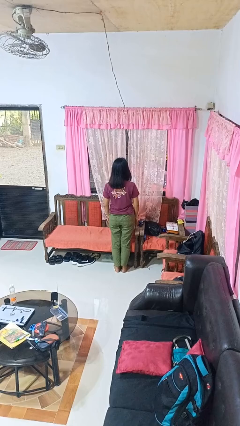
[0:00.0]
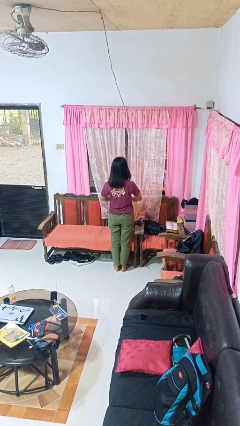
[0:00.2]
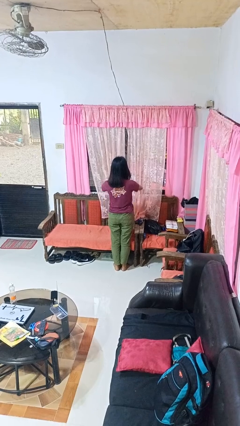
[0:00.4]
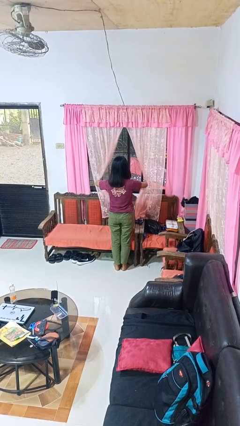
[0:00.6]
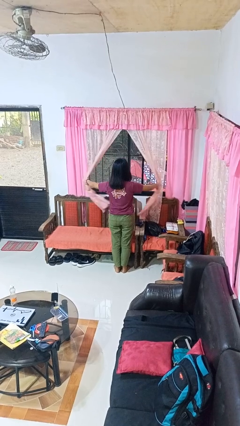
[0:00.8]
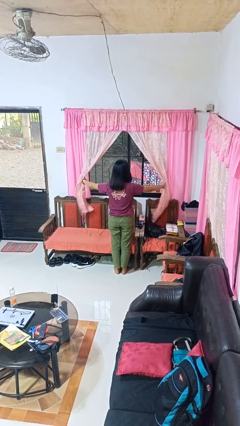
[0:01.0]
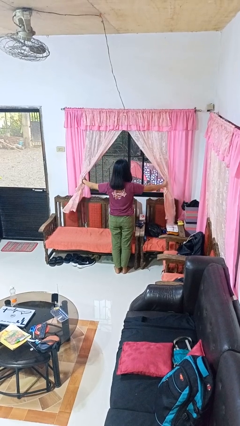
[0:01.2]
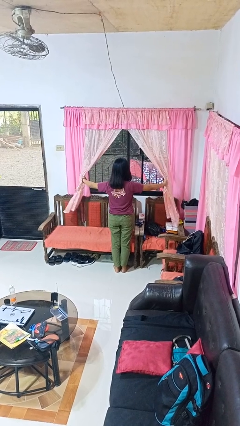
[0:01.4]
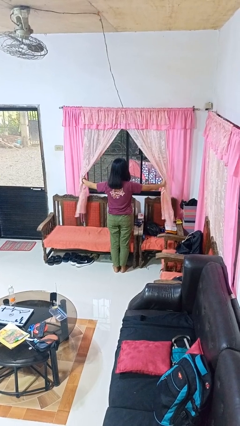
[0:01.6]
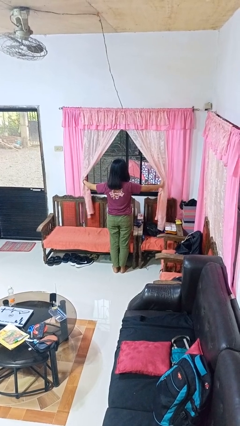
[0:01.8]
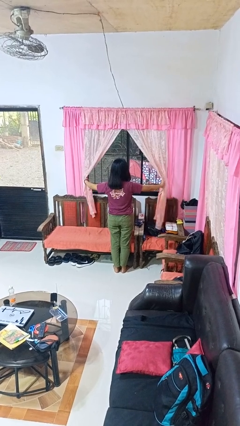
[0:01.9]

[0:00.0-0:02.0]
person opens curtains

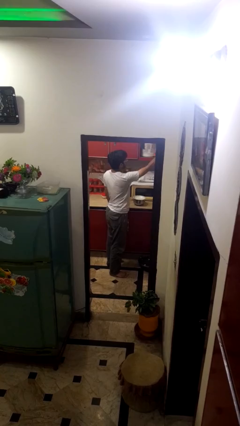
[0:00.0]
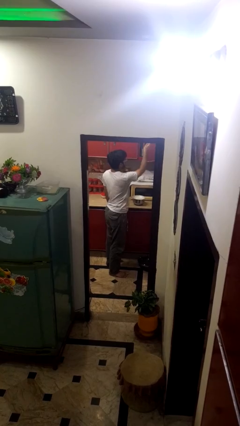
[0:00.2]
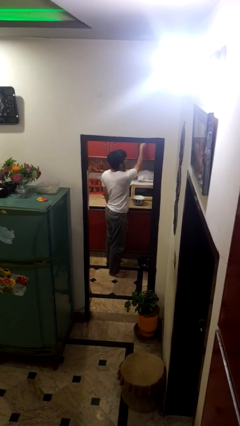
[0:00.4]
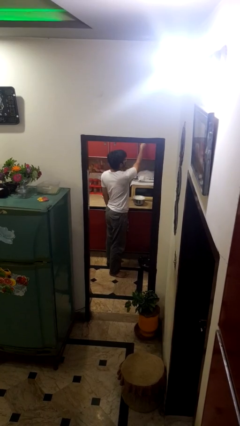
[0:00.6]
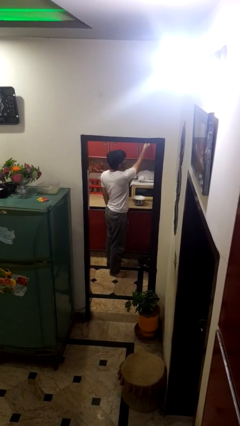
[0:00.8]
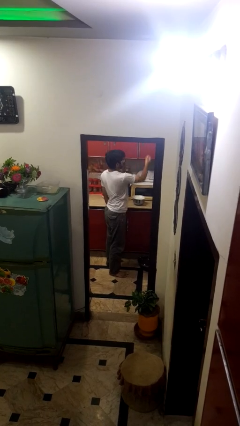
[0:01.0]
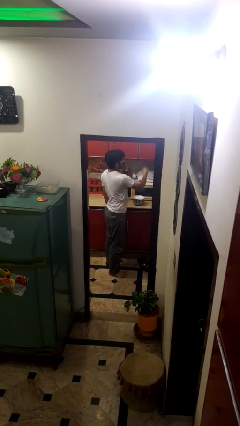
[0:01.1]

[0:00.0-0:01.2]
person closes cabinet

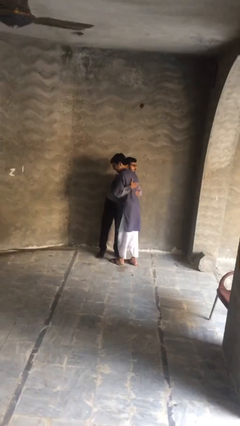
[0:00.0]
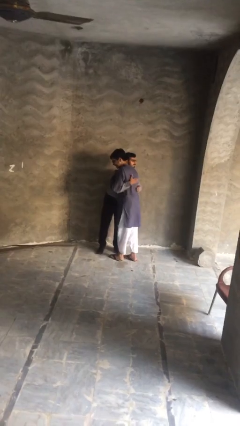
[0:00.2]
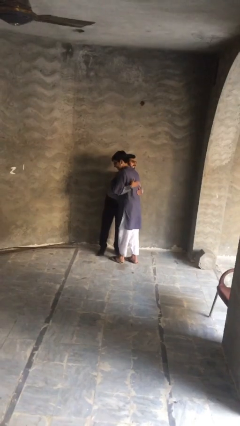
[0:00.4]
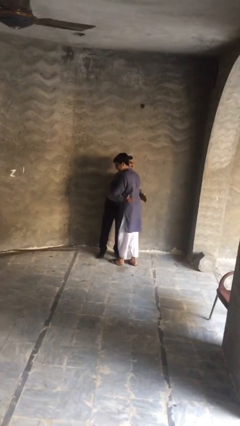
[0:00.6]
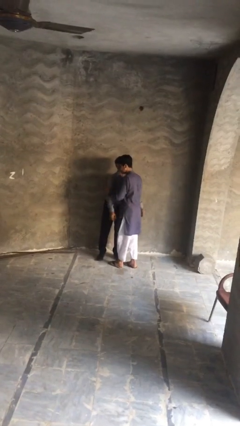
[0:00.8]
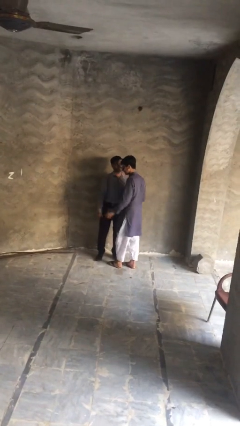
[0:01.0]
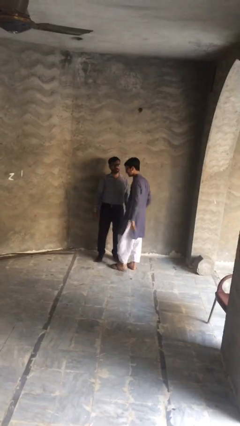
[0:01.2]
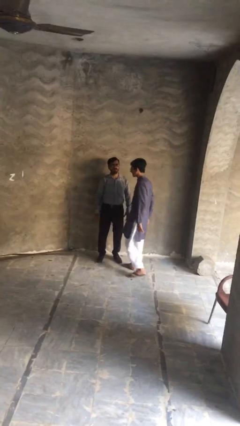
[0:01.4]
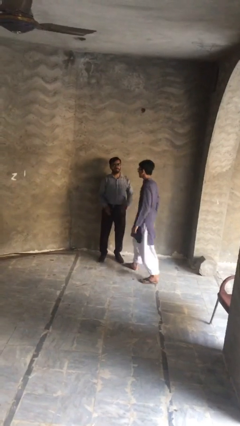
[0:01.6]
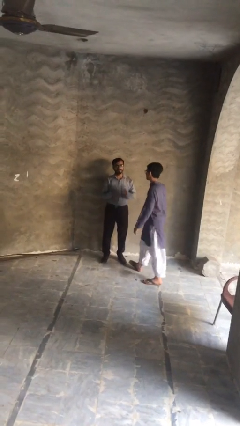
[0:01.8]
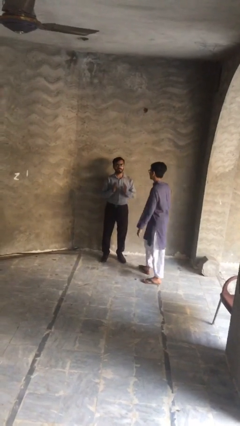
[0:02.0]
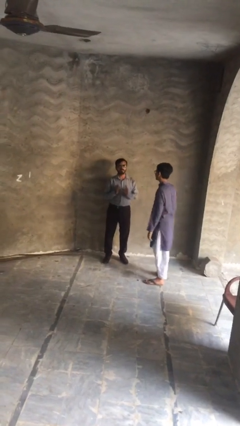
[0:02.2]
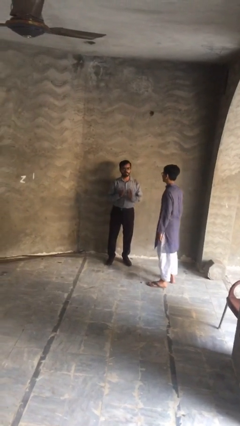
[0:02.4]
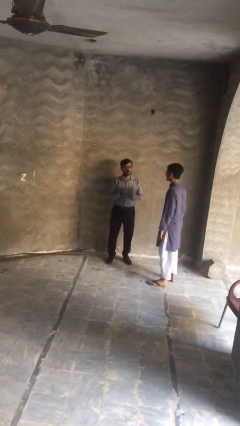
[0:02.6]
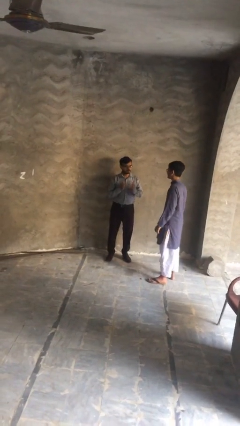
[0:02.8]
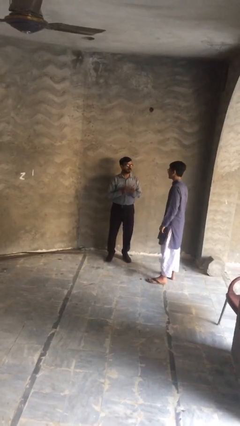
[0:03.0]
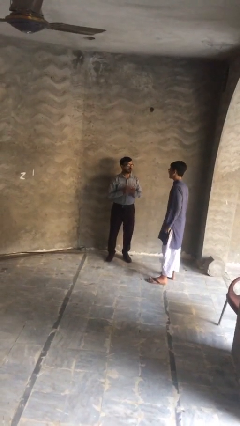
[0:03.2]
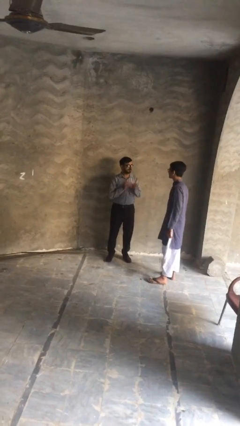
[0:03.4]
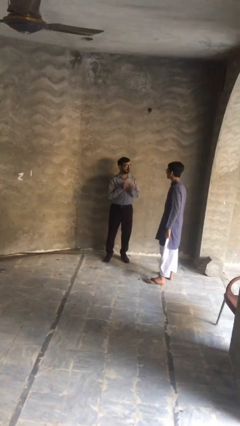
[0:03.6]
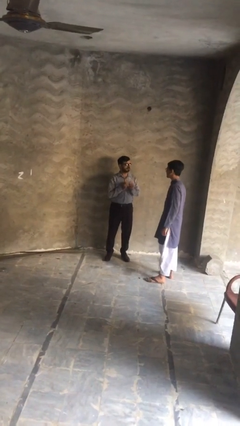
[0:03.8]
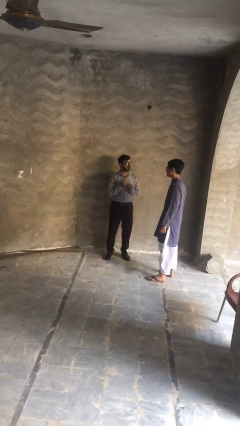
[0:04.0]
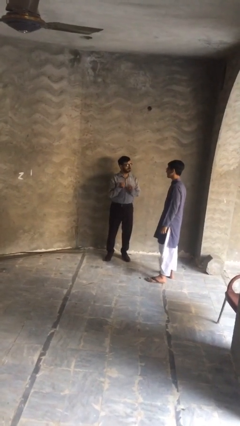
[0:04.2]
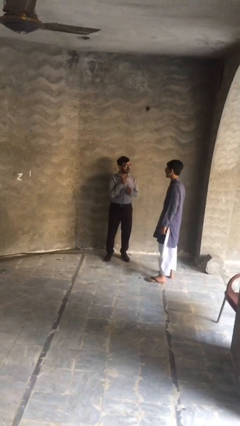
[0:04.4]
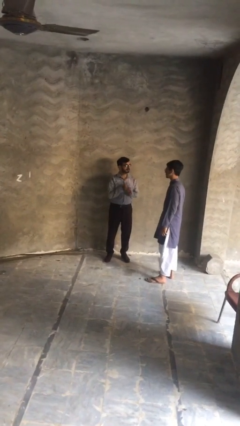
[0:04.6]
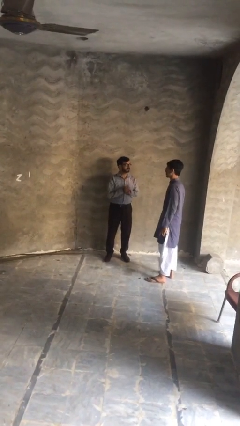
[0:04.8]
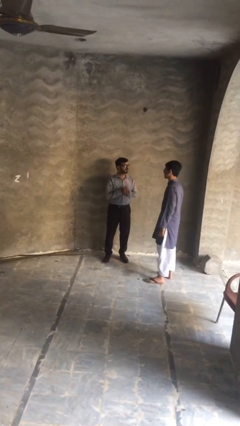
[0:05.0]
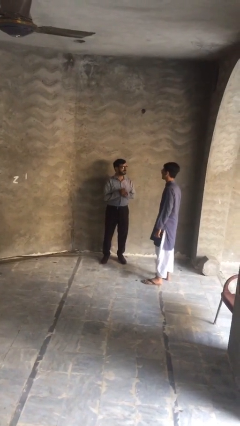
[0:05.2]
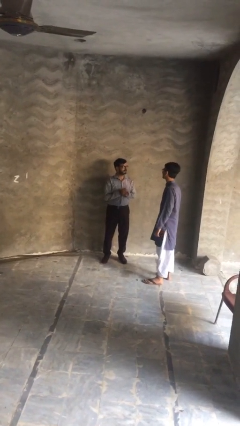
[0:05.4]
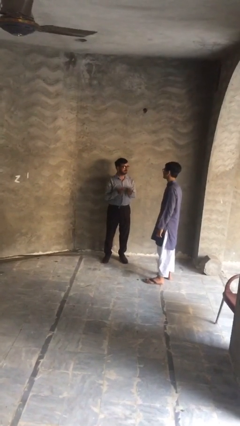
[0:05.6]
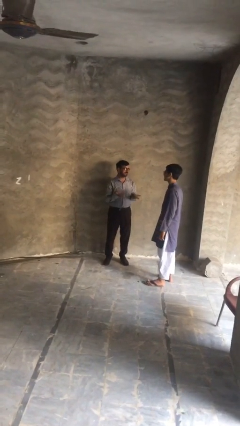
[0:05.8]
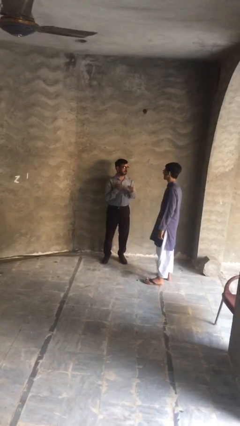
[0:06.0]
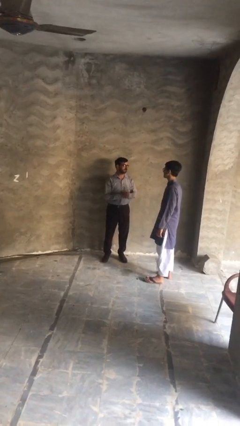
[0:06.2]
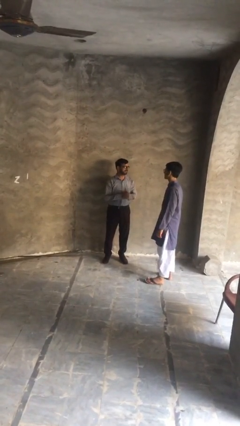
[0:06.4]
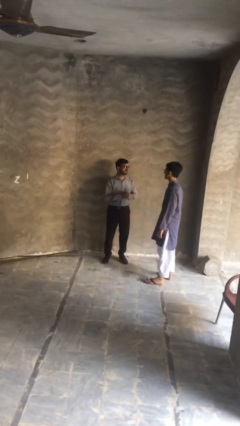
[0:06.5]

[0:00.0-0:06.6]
person talks to person

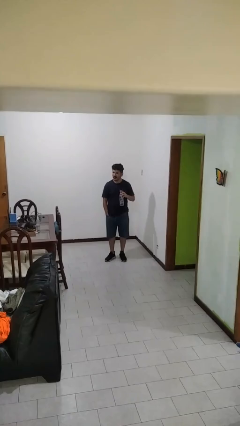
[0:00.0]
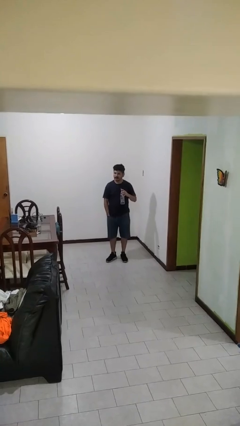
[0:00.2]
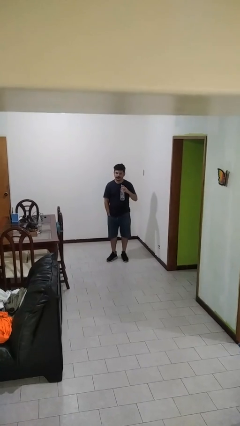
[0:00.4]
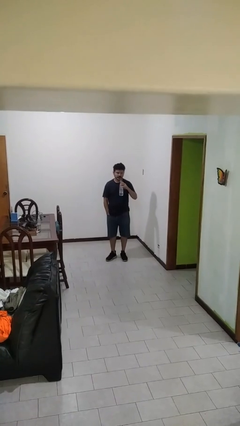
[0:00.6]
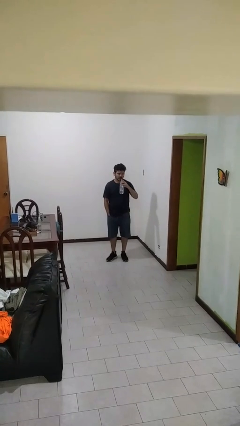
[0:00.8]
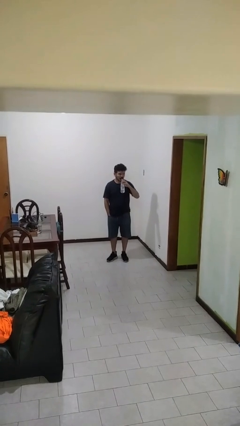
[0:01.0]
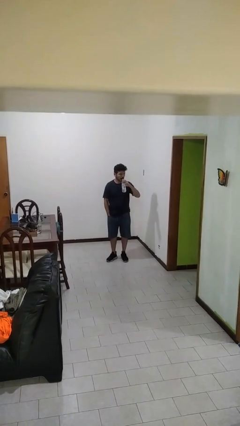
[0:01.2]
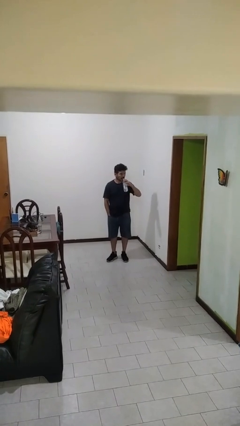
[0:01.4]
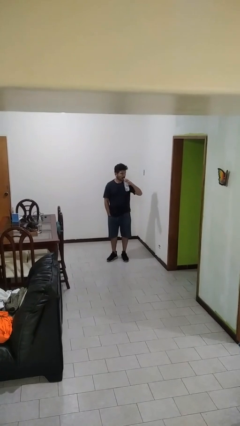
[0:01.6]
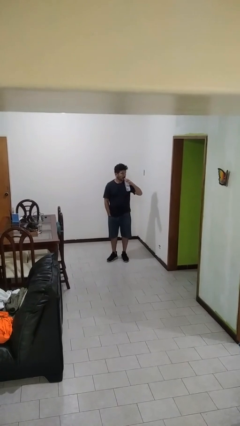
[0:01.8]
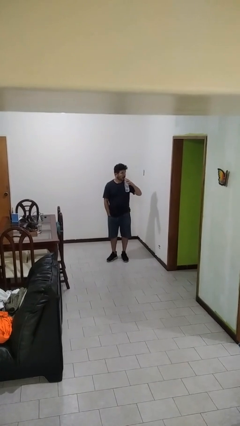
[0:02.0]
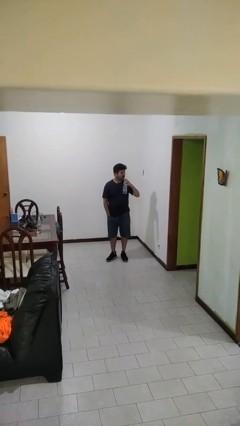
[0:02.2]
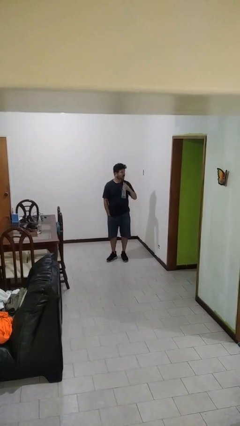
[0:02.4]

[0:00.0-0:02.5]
person drinks from straw

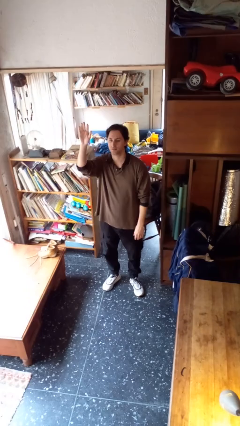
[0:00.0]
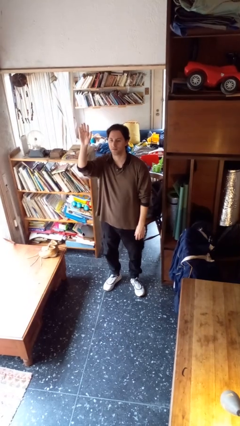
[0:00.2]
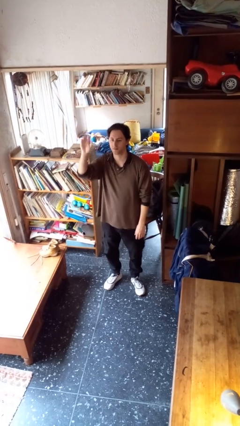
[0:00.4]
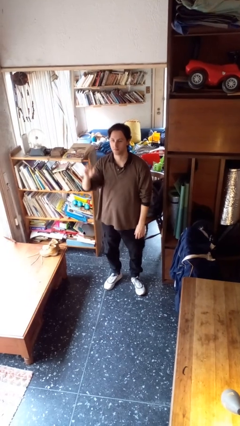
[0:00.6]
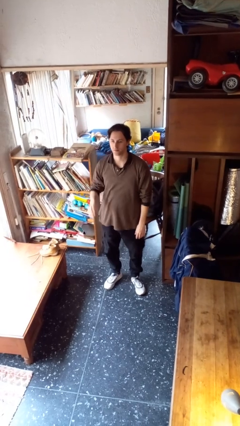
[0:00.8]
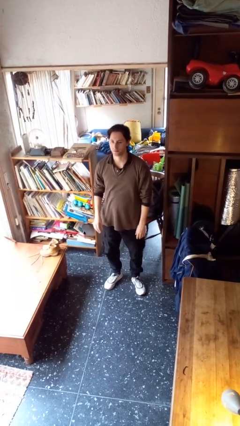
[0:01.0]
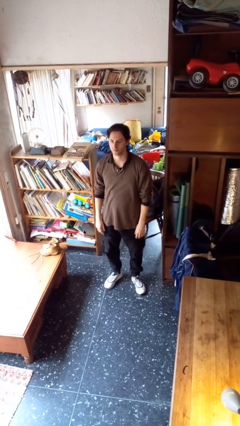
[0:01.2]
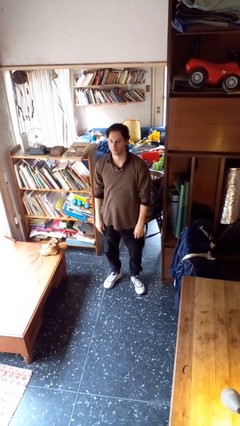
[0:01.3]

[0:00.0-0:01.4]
person gestures lower hand

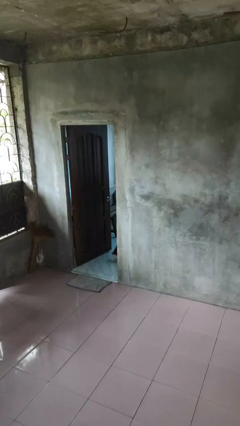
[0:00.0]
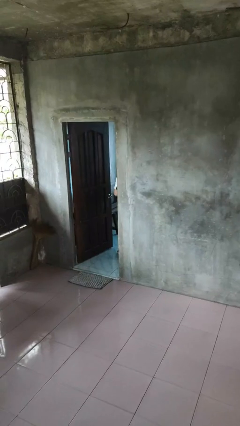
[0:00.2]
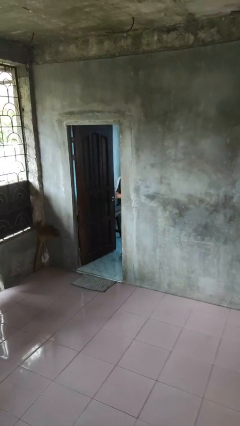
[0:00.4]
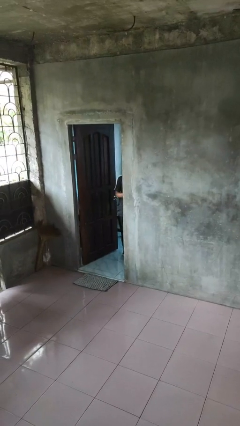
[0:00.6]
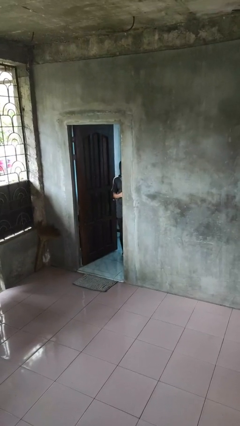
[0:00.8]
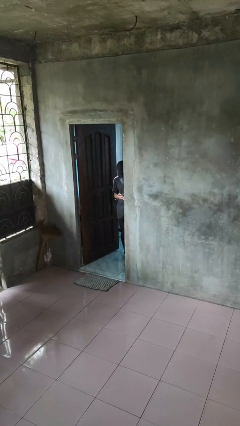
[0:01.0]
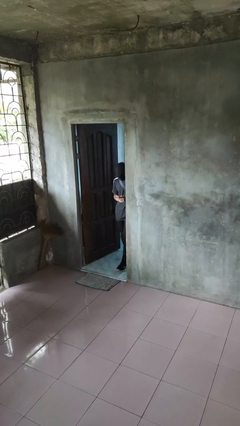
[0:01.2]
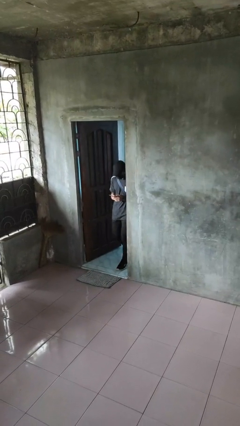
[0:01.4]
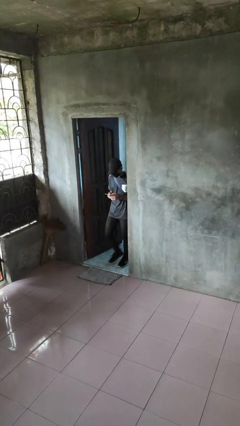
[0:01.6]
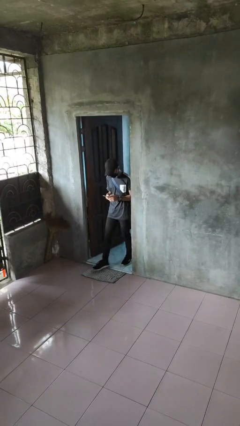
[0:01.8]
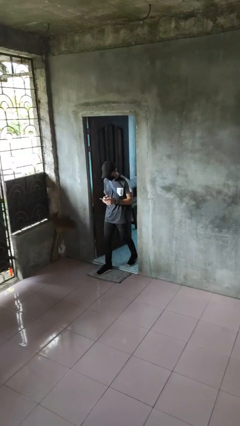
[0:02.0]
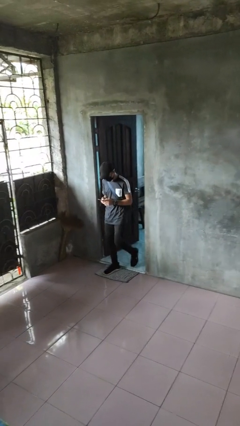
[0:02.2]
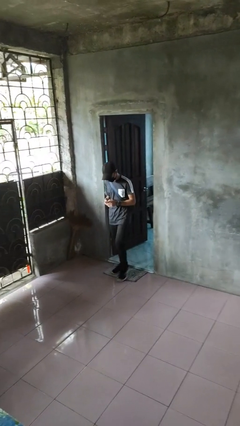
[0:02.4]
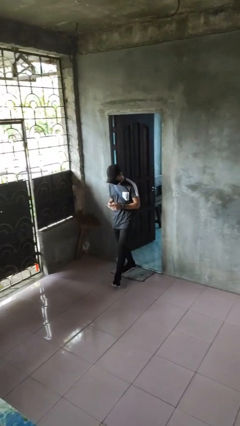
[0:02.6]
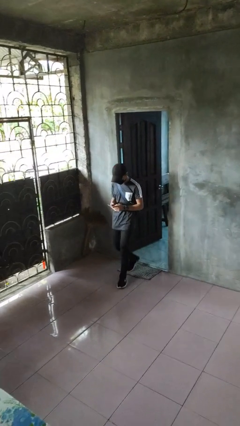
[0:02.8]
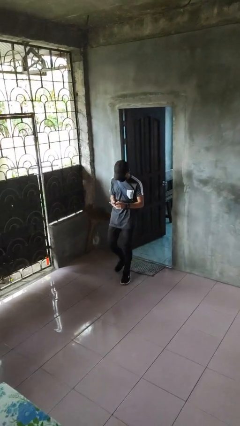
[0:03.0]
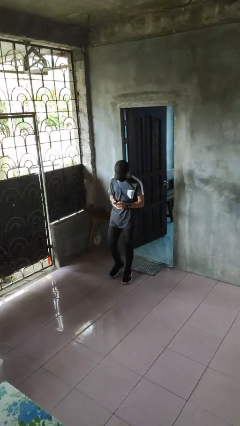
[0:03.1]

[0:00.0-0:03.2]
person enters scene through structure

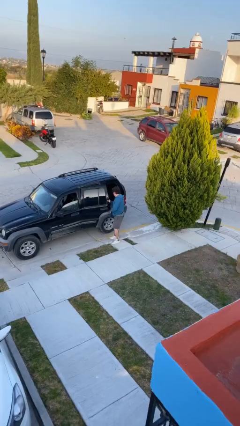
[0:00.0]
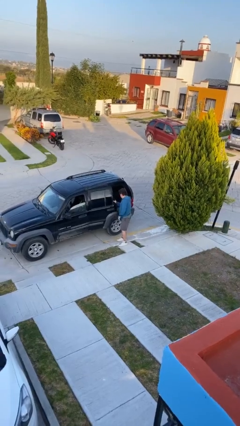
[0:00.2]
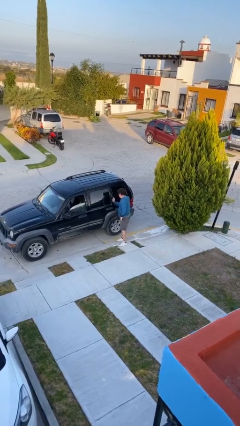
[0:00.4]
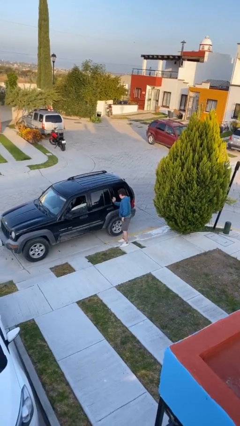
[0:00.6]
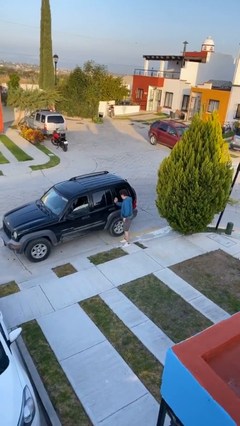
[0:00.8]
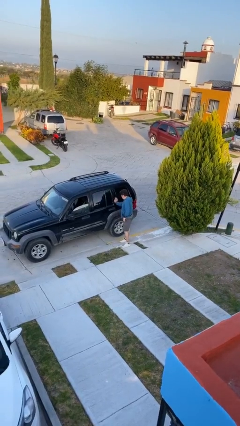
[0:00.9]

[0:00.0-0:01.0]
person closes car door
